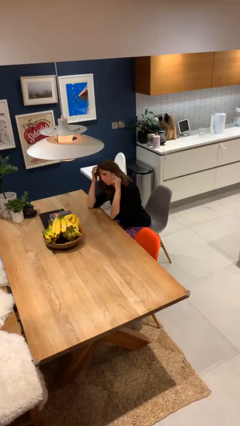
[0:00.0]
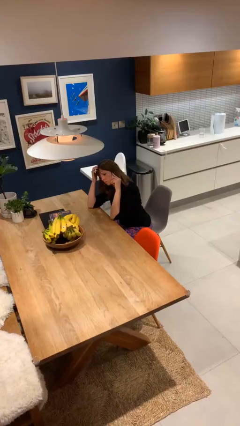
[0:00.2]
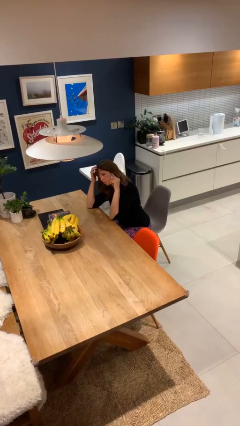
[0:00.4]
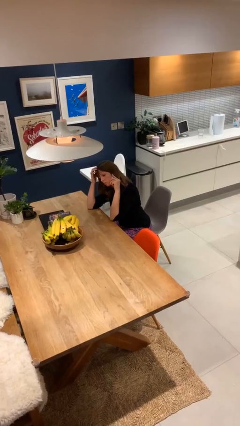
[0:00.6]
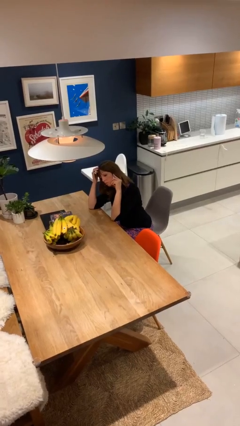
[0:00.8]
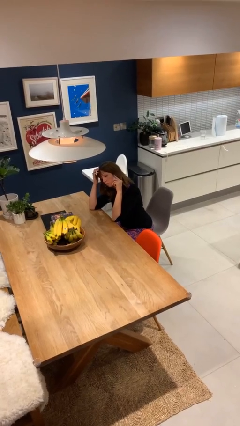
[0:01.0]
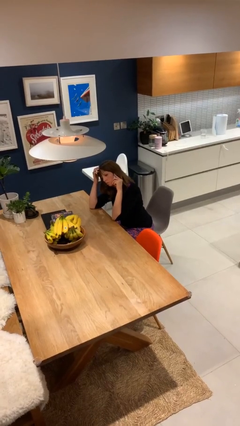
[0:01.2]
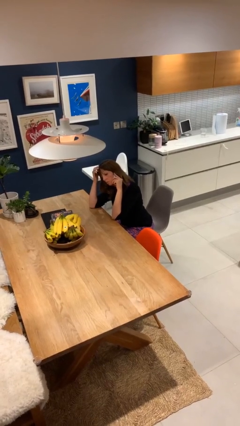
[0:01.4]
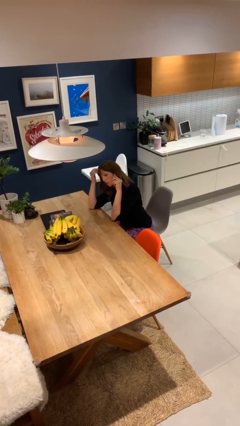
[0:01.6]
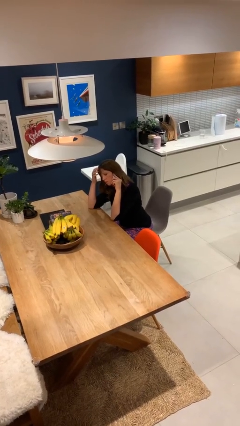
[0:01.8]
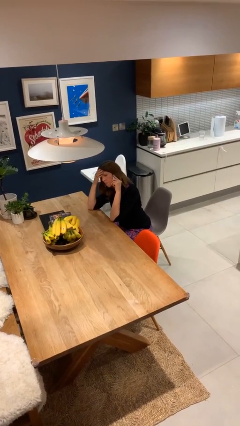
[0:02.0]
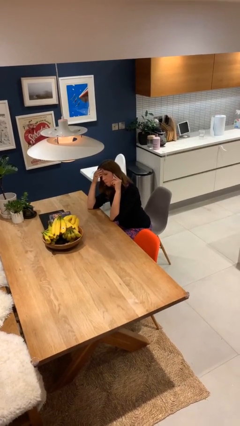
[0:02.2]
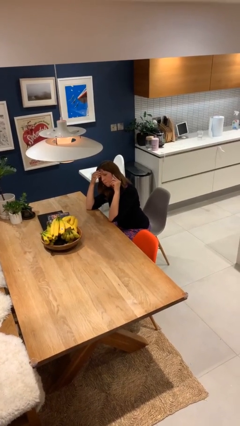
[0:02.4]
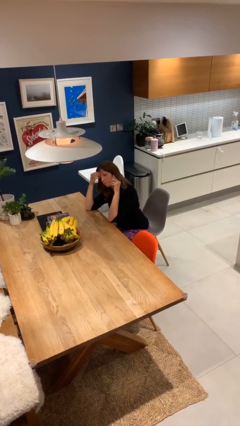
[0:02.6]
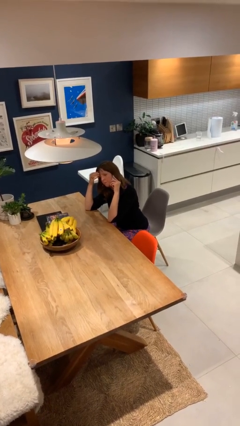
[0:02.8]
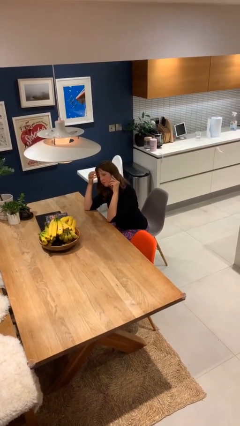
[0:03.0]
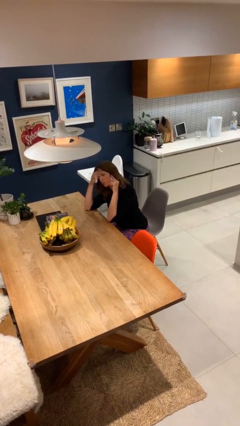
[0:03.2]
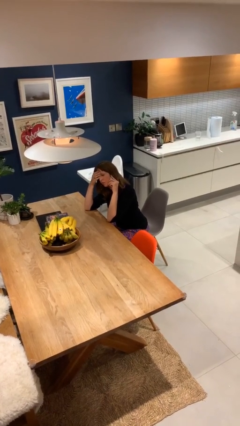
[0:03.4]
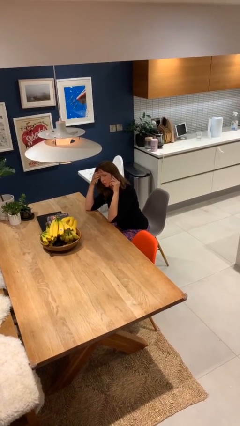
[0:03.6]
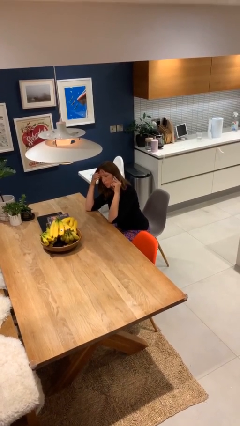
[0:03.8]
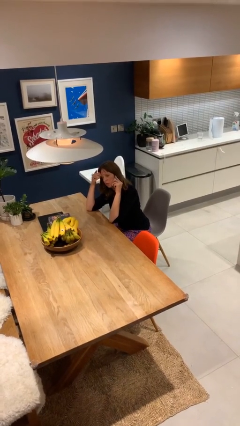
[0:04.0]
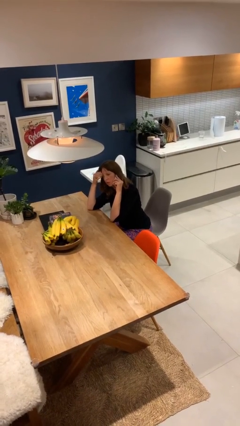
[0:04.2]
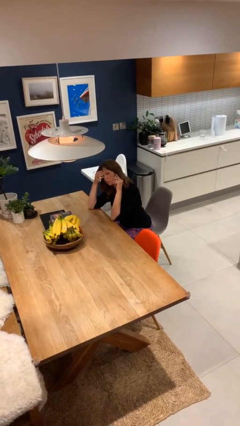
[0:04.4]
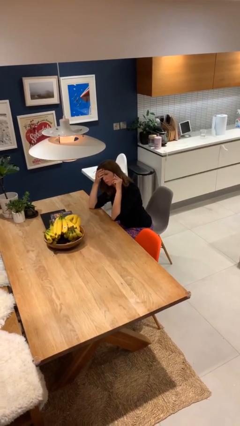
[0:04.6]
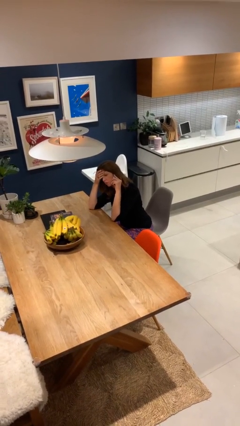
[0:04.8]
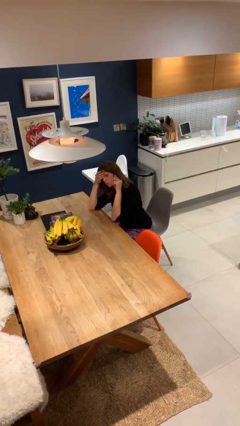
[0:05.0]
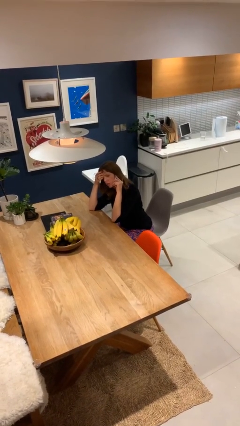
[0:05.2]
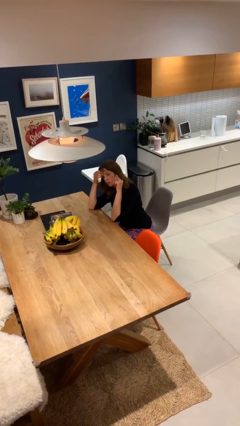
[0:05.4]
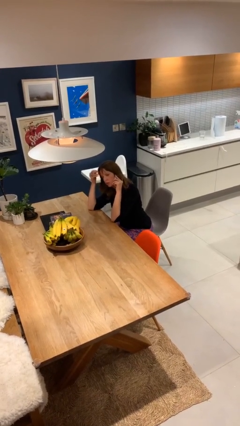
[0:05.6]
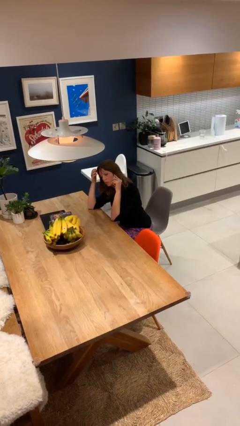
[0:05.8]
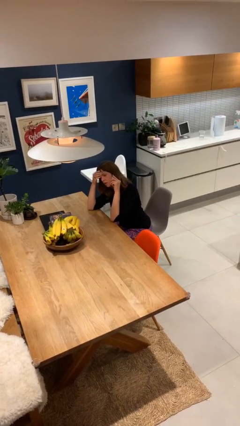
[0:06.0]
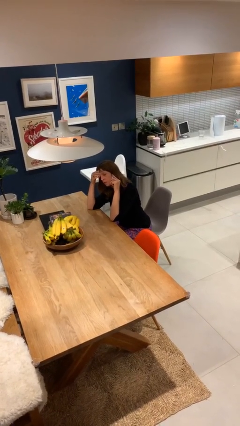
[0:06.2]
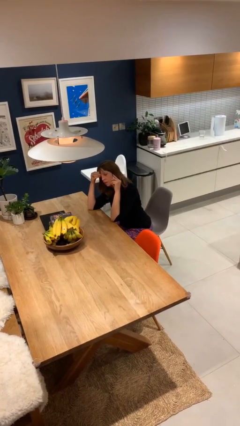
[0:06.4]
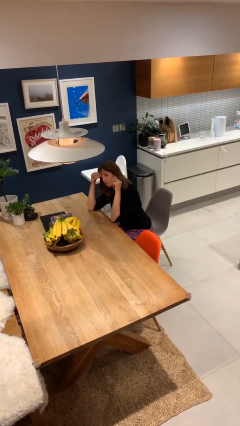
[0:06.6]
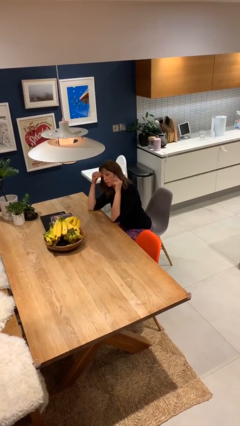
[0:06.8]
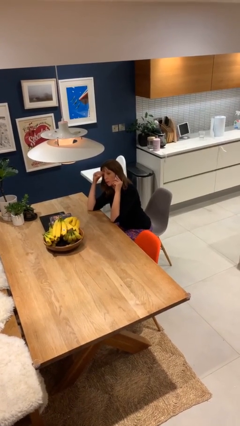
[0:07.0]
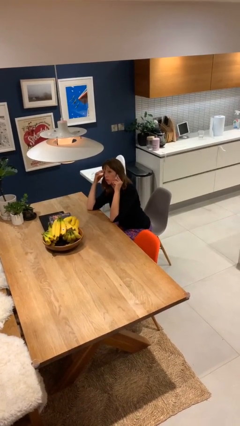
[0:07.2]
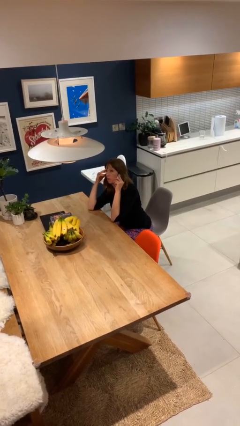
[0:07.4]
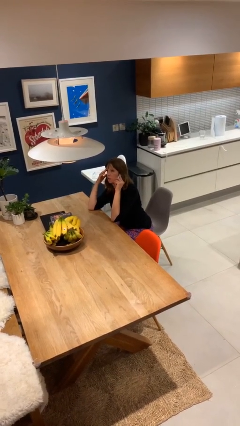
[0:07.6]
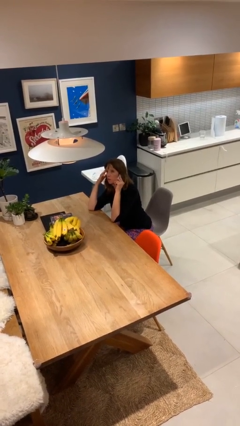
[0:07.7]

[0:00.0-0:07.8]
person talks on phone

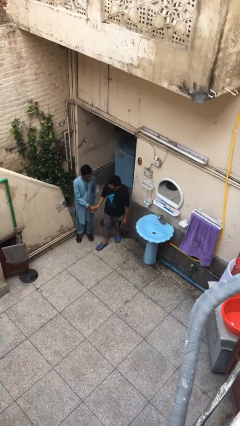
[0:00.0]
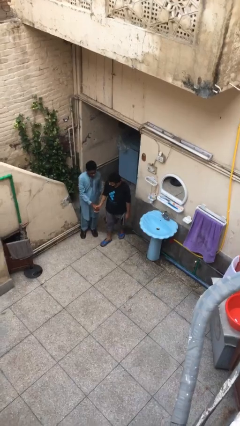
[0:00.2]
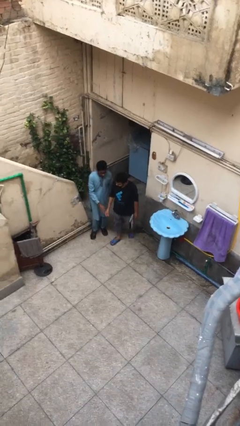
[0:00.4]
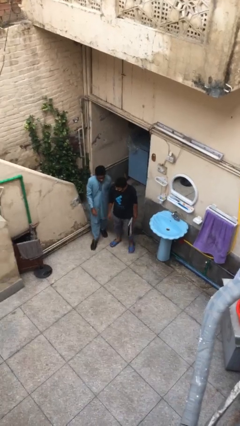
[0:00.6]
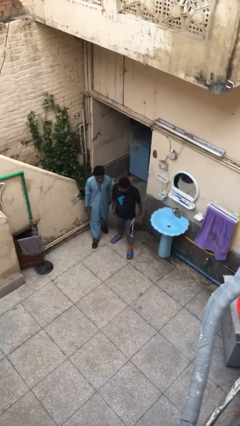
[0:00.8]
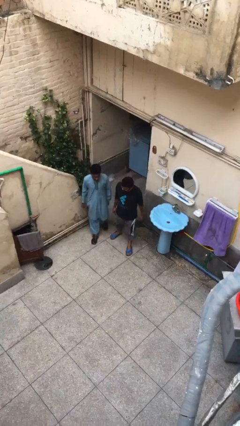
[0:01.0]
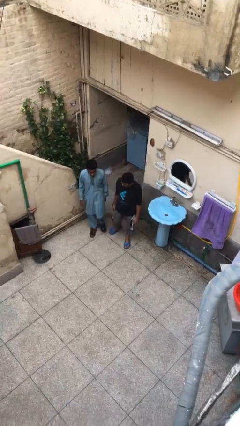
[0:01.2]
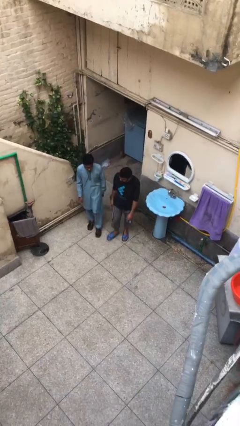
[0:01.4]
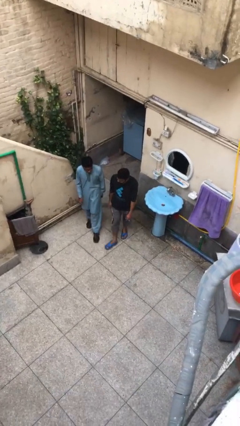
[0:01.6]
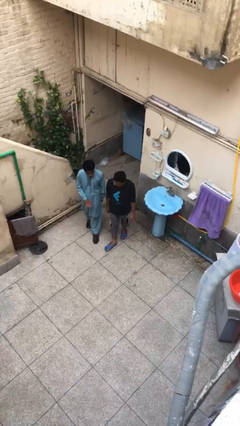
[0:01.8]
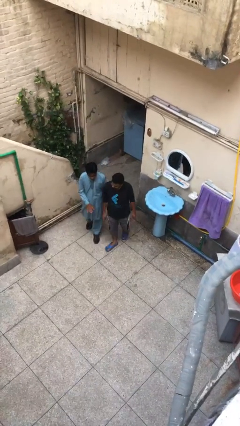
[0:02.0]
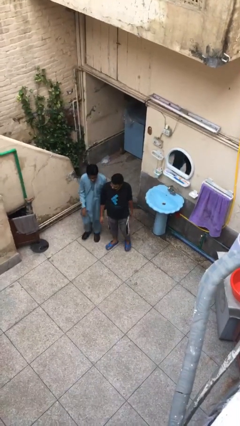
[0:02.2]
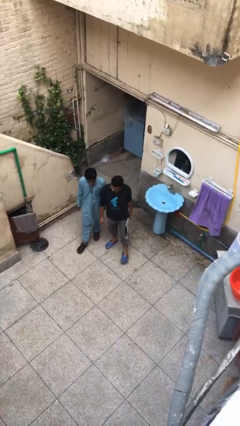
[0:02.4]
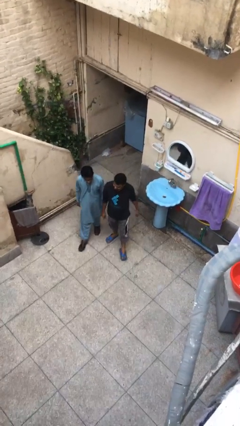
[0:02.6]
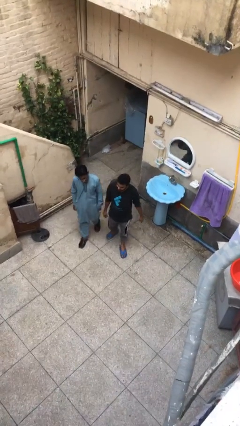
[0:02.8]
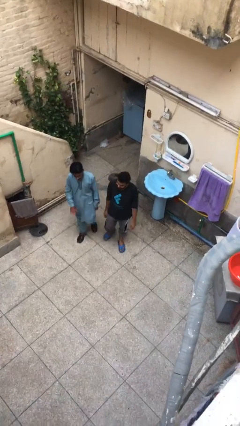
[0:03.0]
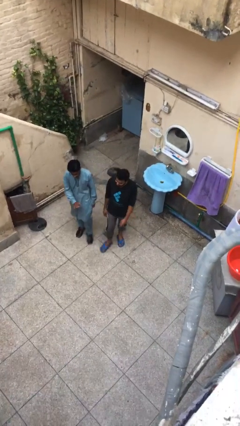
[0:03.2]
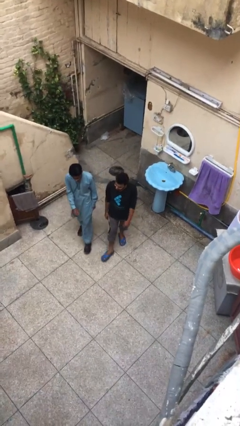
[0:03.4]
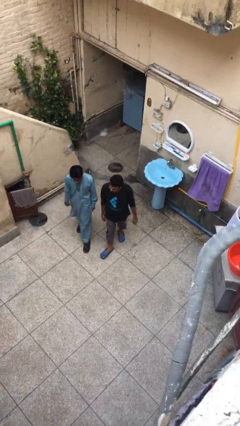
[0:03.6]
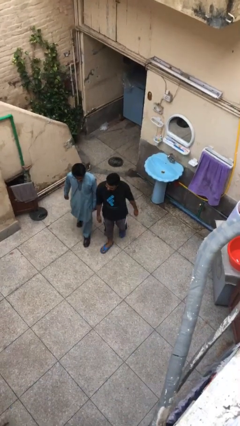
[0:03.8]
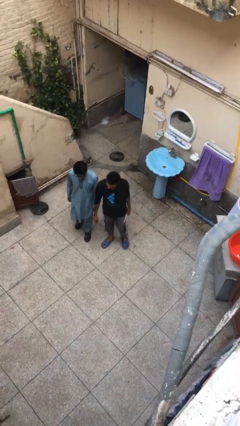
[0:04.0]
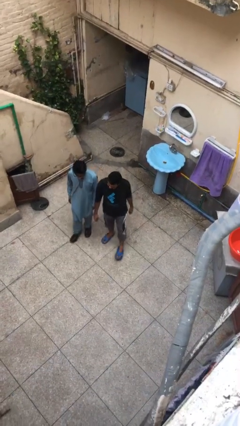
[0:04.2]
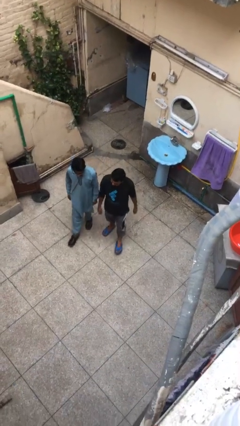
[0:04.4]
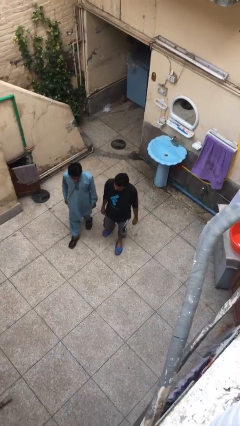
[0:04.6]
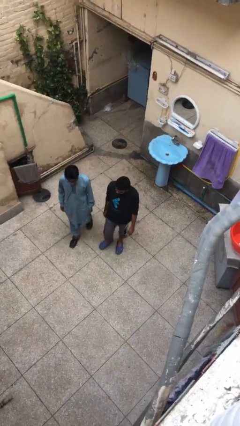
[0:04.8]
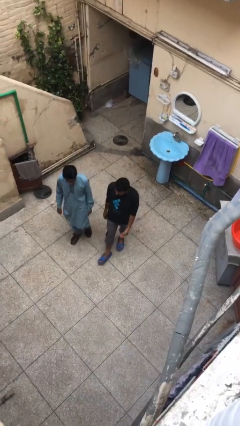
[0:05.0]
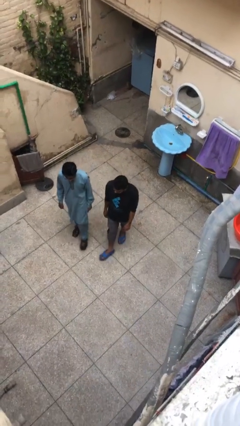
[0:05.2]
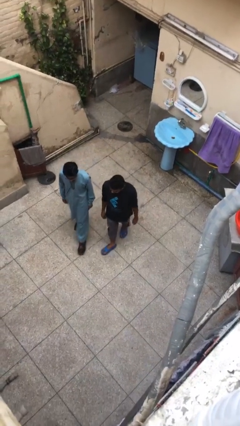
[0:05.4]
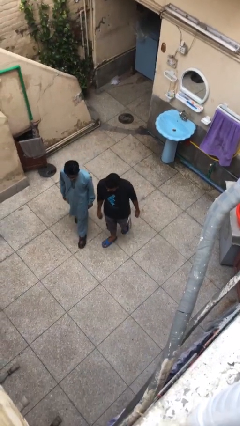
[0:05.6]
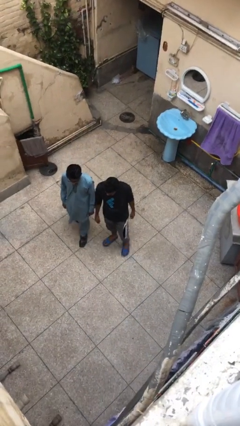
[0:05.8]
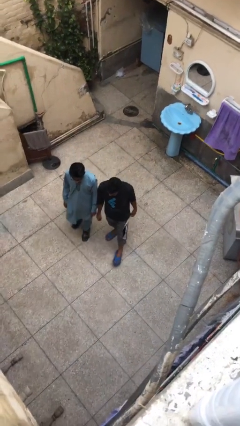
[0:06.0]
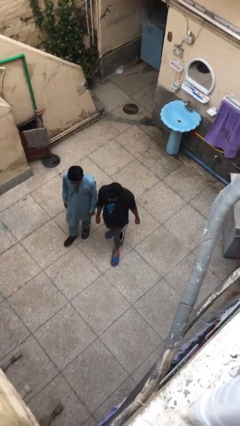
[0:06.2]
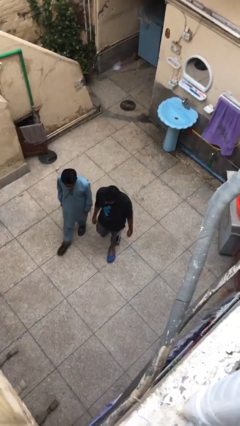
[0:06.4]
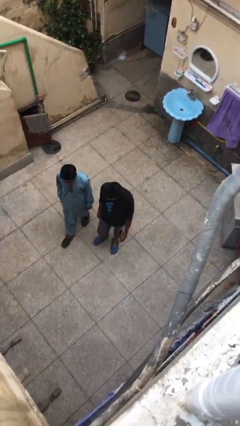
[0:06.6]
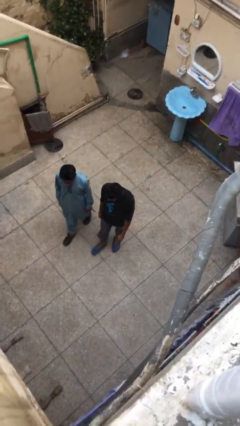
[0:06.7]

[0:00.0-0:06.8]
person talks to person

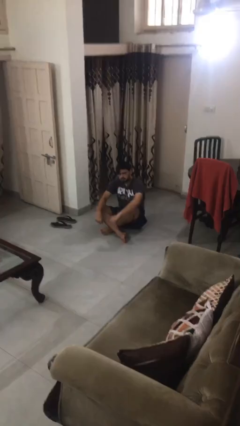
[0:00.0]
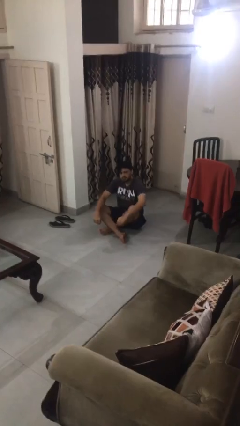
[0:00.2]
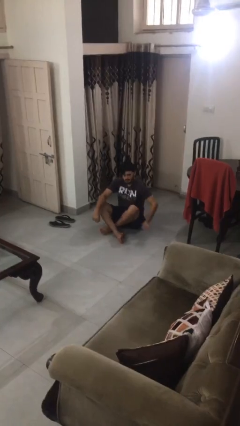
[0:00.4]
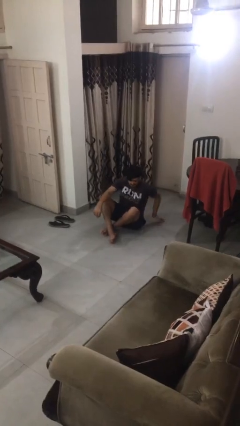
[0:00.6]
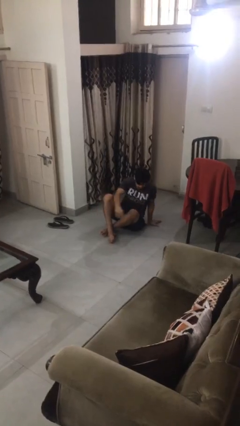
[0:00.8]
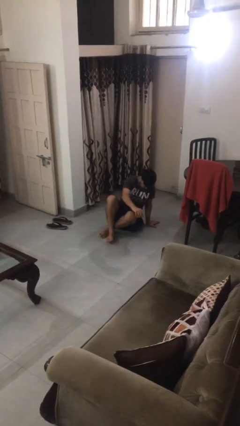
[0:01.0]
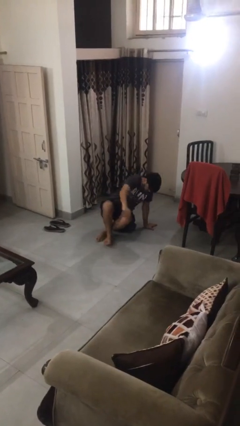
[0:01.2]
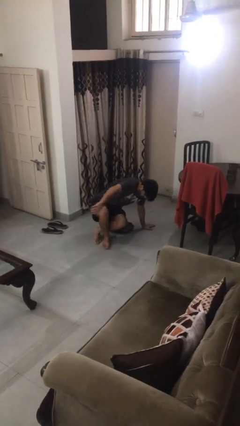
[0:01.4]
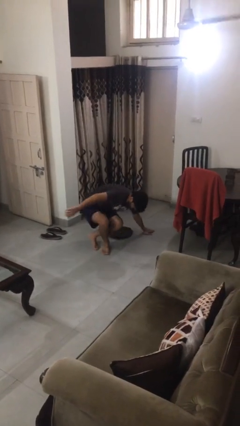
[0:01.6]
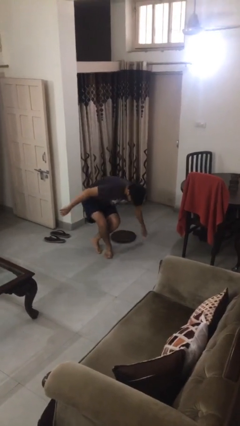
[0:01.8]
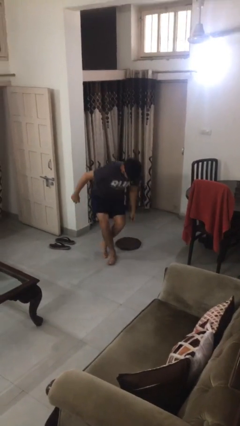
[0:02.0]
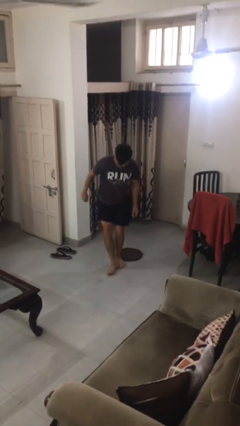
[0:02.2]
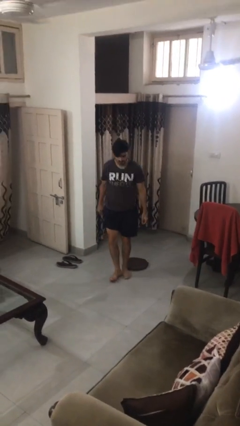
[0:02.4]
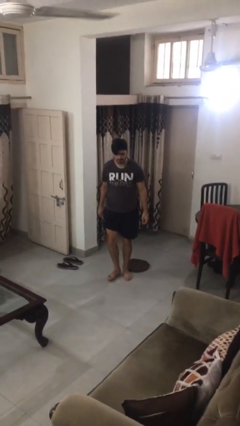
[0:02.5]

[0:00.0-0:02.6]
person stands up from floor

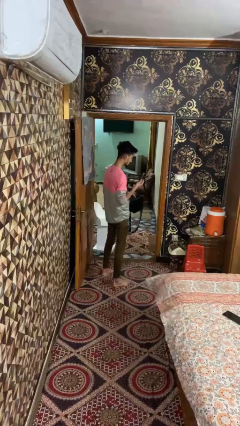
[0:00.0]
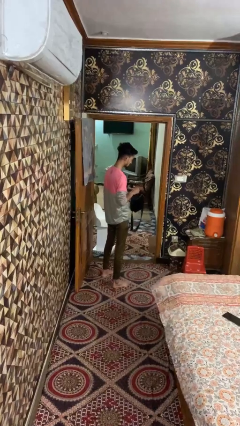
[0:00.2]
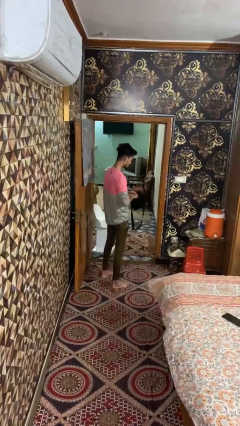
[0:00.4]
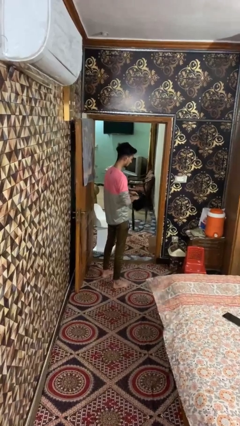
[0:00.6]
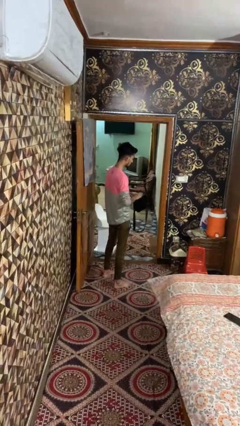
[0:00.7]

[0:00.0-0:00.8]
person puts object into bag
